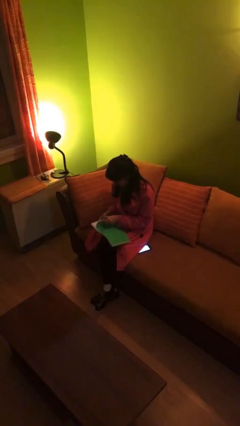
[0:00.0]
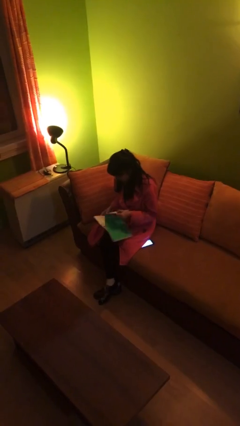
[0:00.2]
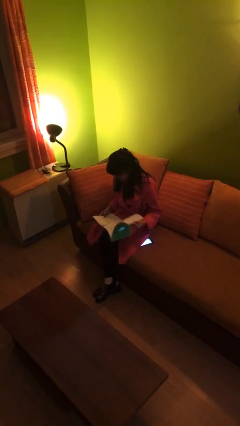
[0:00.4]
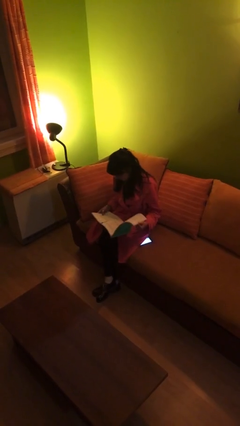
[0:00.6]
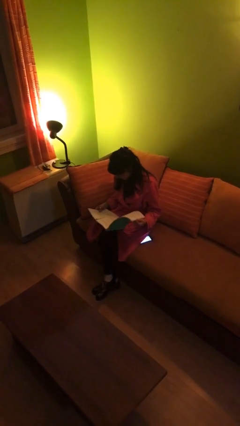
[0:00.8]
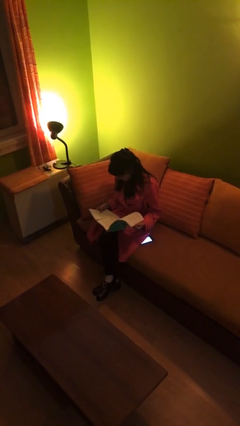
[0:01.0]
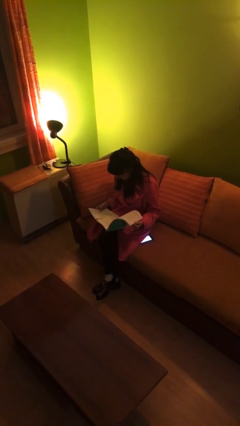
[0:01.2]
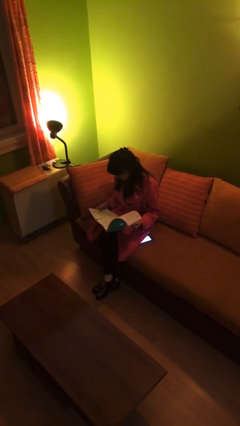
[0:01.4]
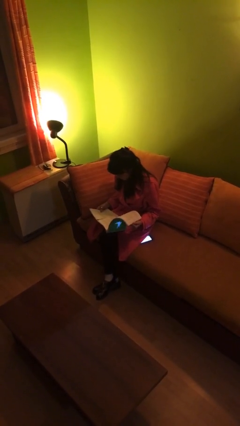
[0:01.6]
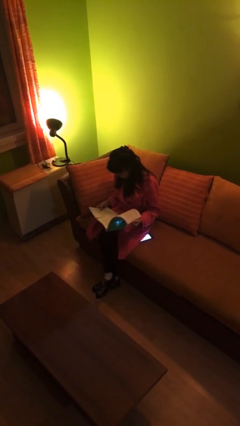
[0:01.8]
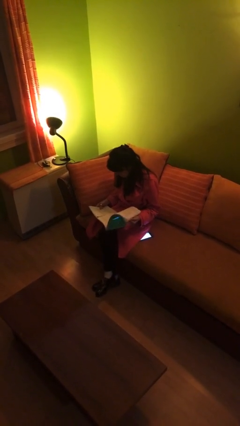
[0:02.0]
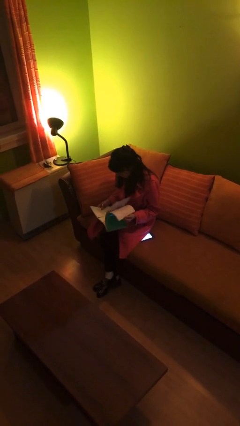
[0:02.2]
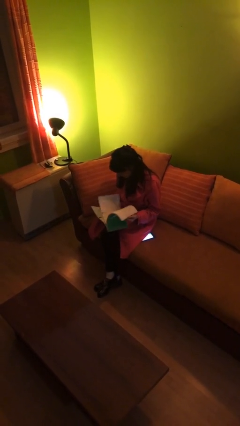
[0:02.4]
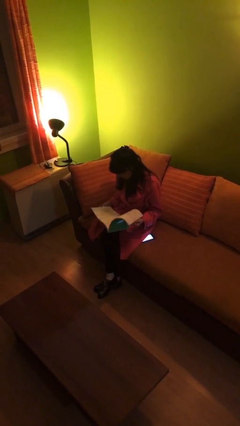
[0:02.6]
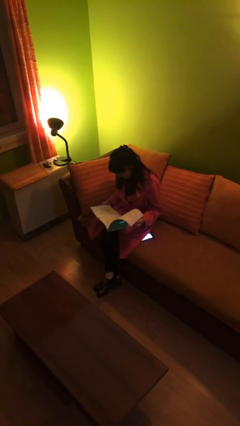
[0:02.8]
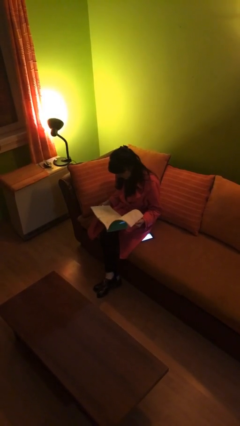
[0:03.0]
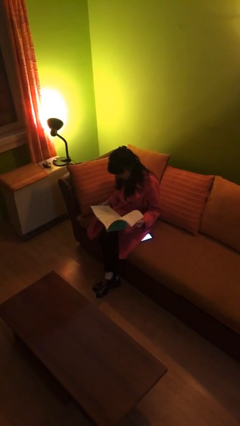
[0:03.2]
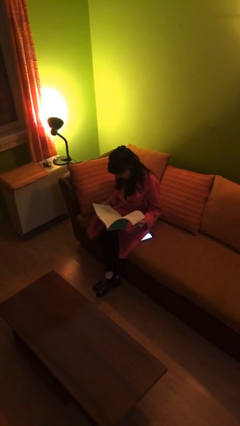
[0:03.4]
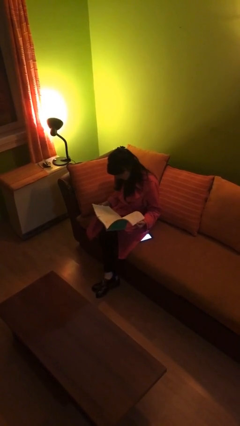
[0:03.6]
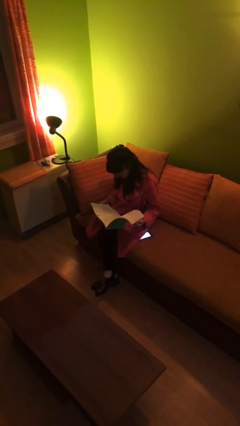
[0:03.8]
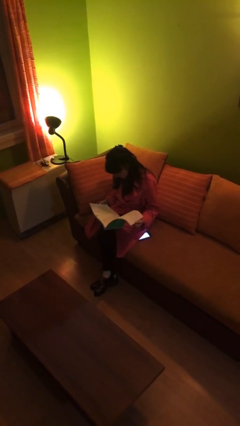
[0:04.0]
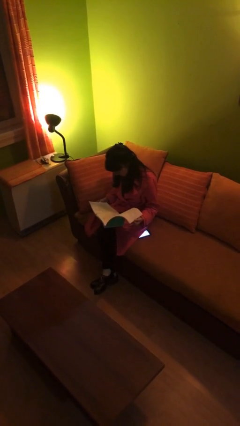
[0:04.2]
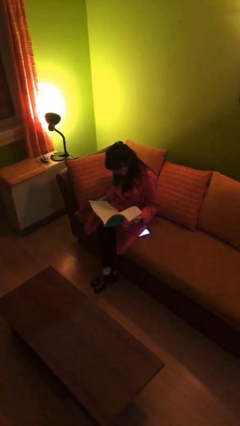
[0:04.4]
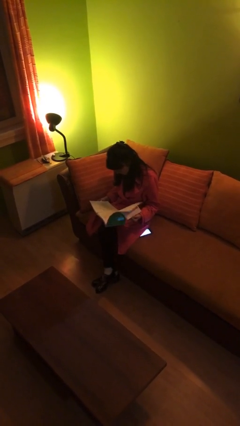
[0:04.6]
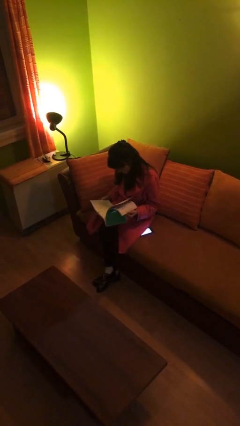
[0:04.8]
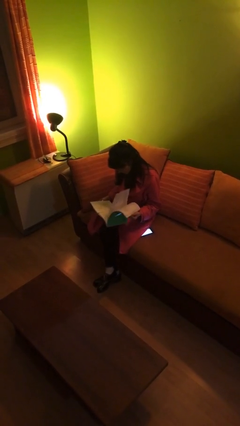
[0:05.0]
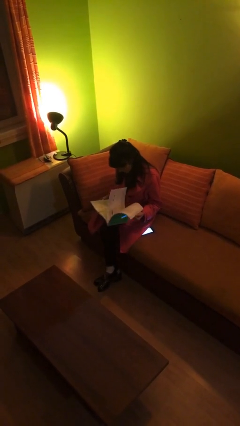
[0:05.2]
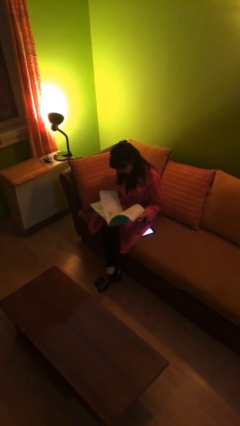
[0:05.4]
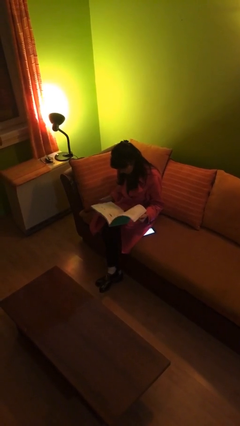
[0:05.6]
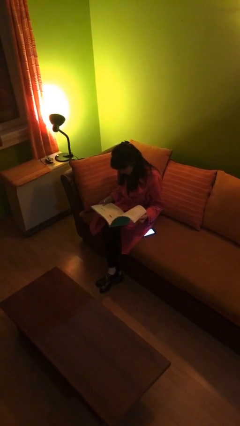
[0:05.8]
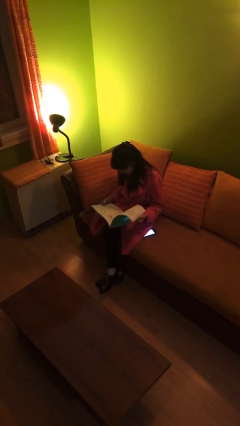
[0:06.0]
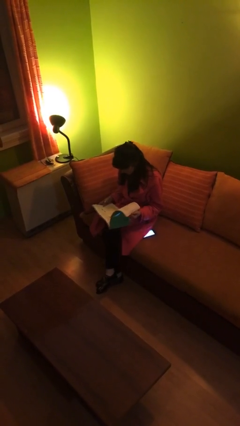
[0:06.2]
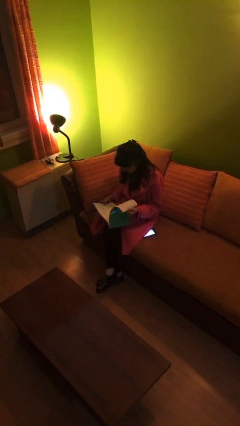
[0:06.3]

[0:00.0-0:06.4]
person reads document

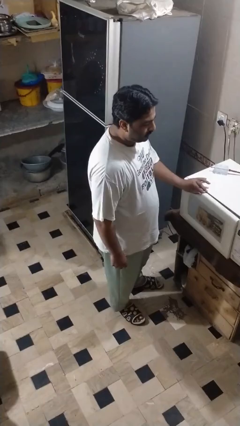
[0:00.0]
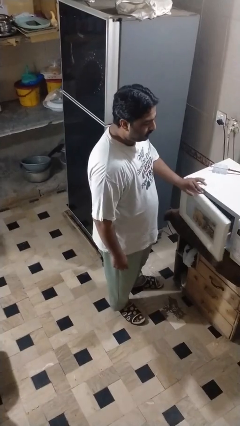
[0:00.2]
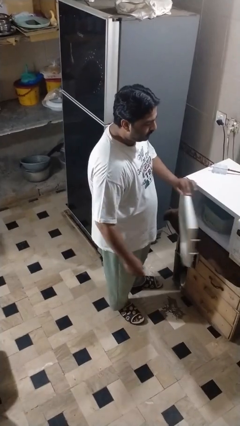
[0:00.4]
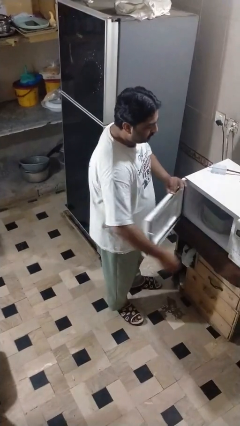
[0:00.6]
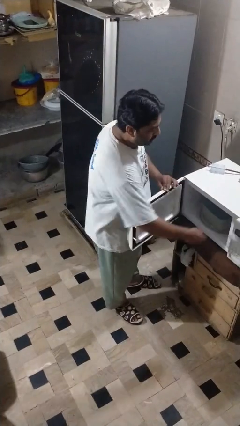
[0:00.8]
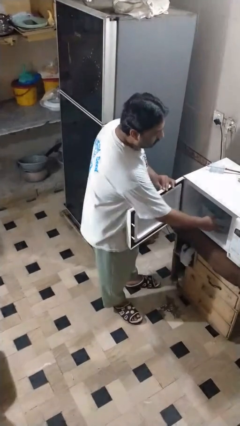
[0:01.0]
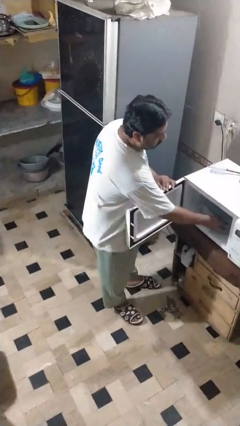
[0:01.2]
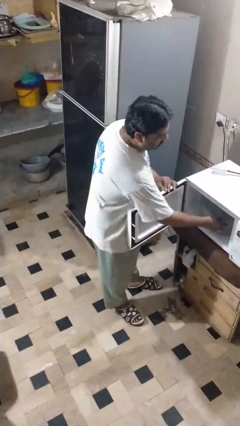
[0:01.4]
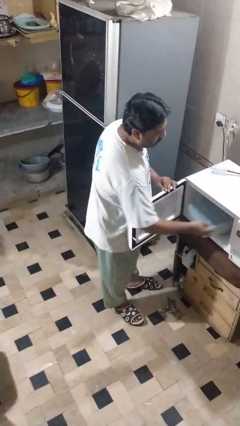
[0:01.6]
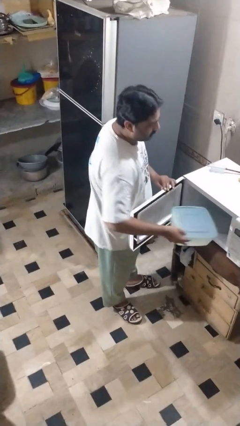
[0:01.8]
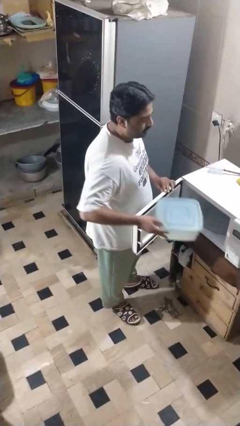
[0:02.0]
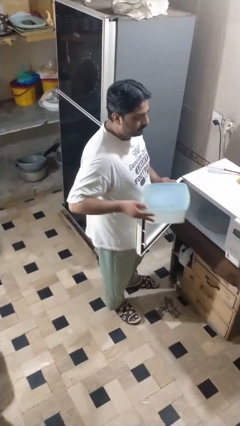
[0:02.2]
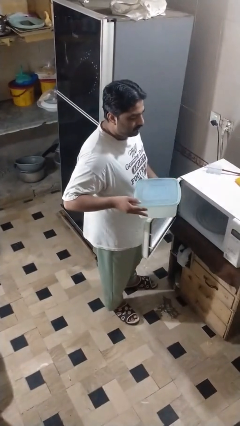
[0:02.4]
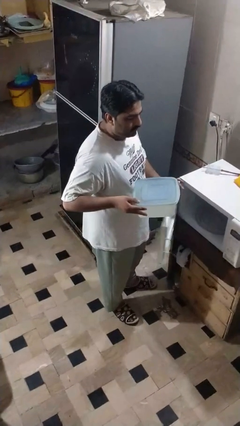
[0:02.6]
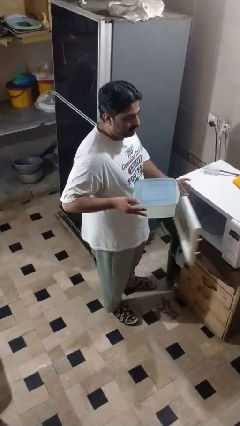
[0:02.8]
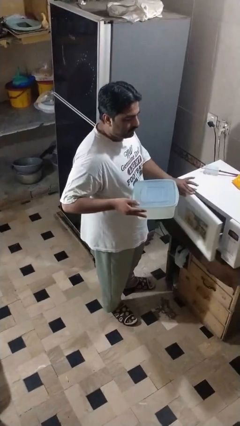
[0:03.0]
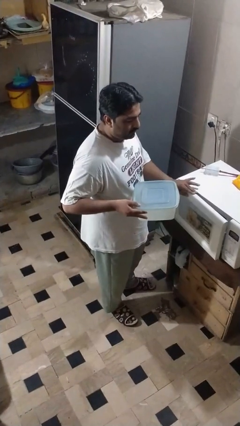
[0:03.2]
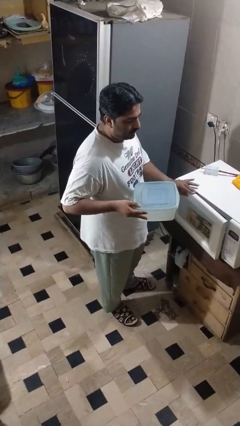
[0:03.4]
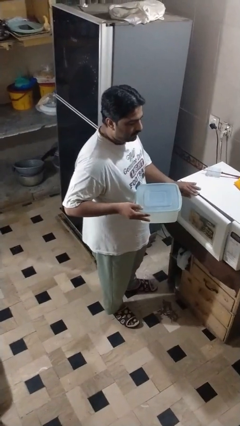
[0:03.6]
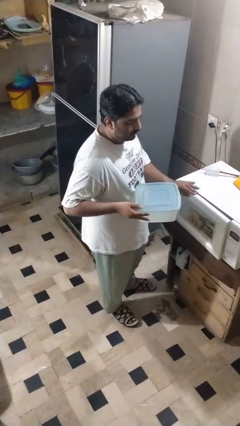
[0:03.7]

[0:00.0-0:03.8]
person takes object from microwave

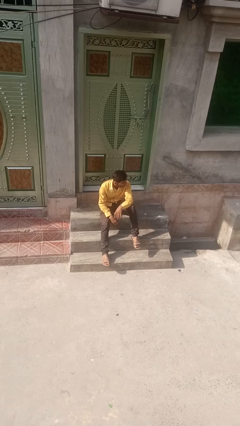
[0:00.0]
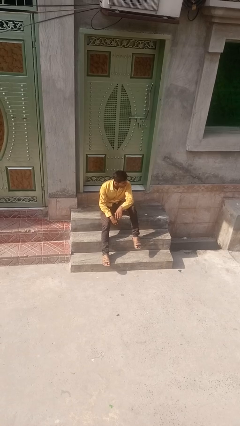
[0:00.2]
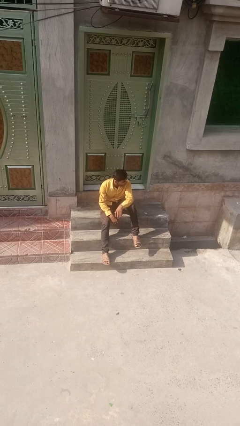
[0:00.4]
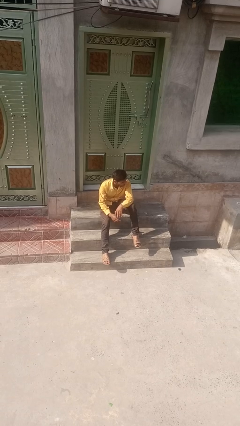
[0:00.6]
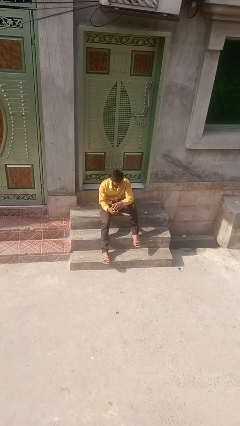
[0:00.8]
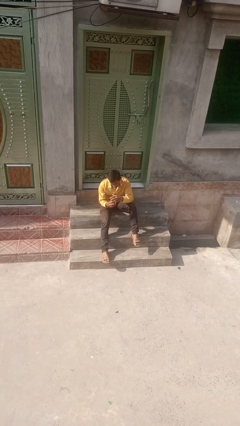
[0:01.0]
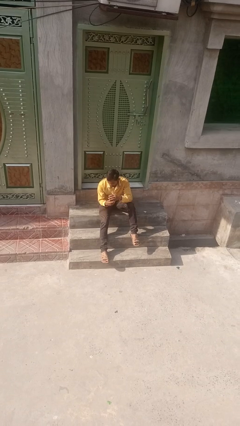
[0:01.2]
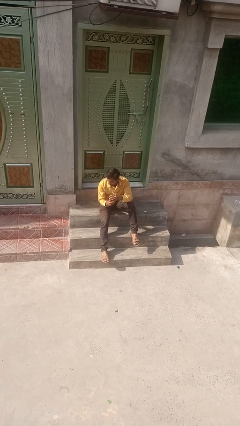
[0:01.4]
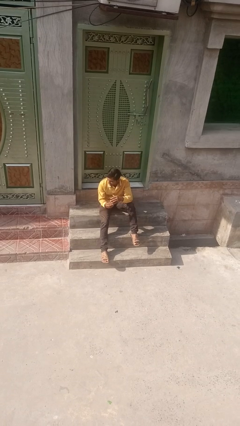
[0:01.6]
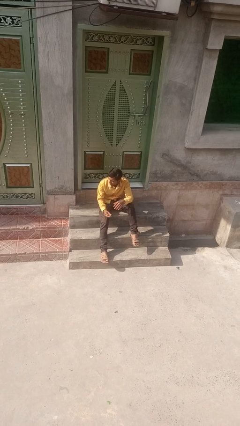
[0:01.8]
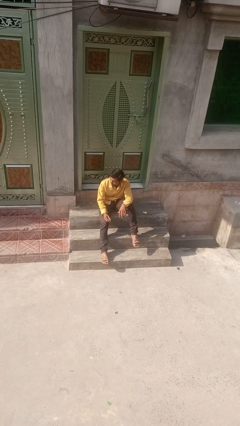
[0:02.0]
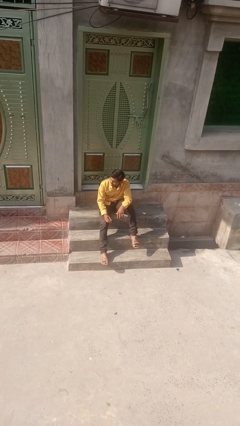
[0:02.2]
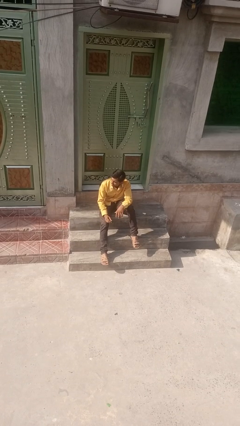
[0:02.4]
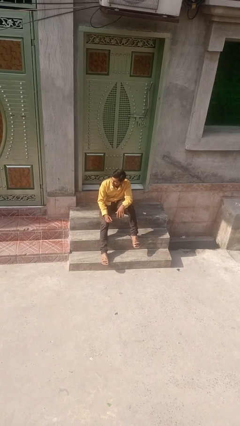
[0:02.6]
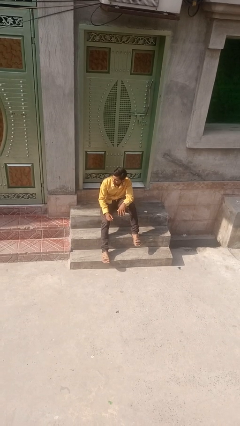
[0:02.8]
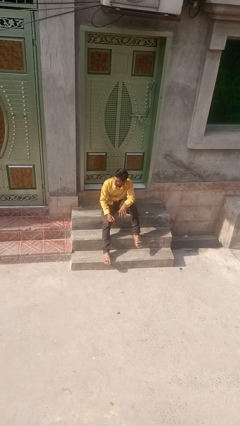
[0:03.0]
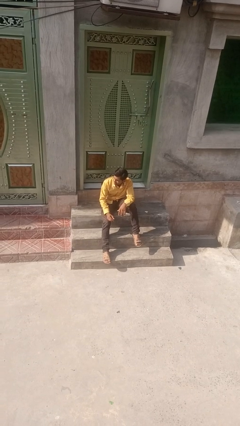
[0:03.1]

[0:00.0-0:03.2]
person takes off ring

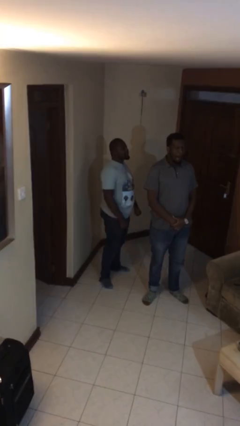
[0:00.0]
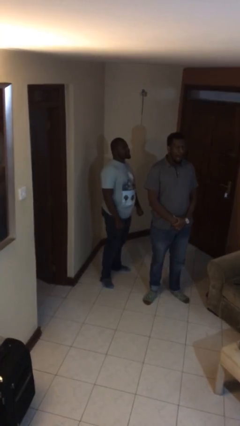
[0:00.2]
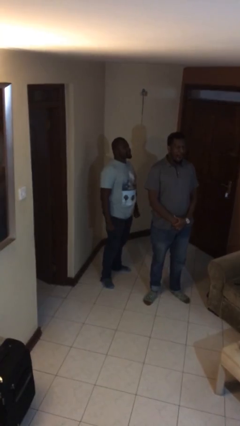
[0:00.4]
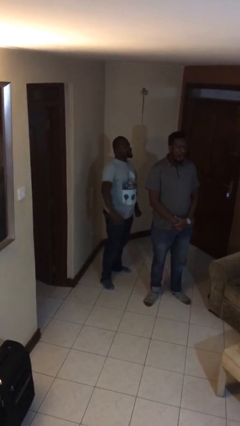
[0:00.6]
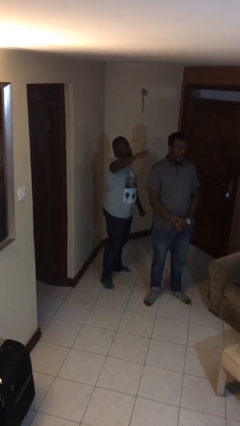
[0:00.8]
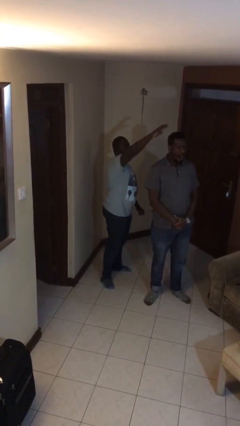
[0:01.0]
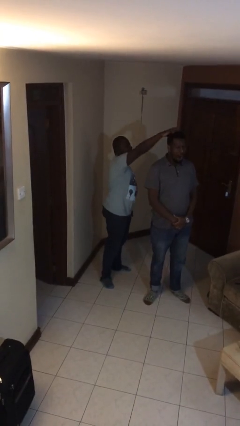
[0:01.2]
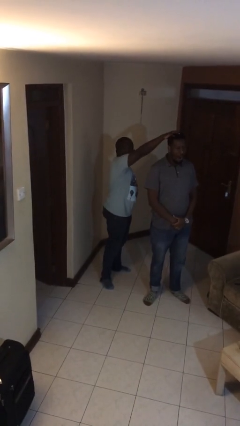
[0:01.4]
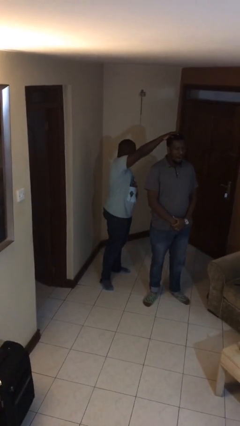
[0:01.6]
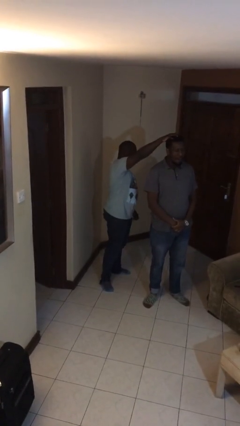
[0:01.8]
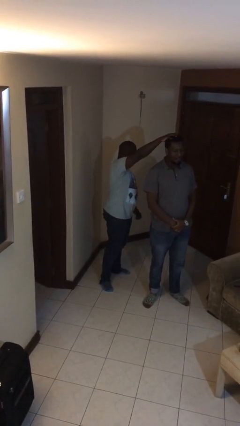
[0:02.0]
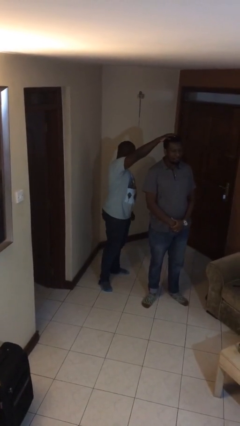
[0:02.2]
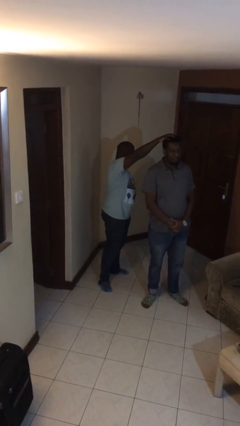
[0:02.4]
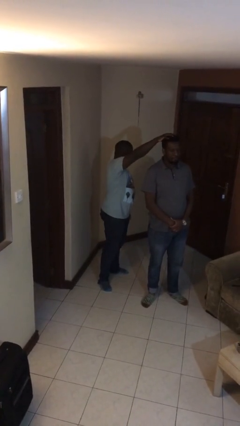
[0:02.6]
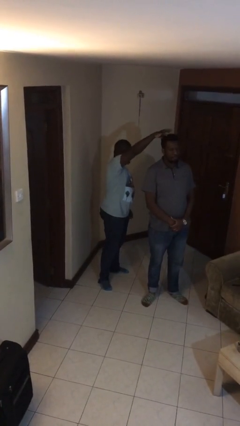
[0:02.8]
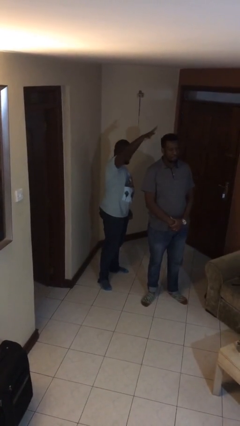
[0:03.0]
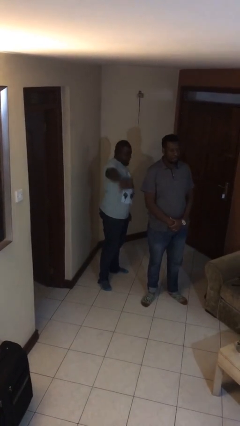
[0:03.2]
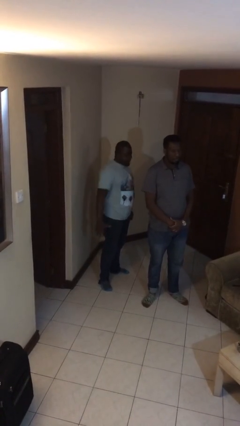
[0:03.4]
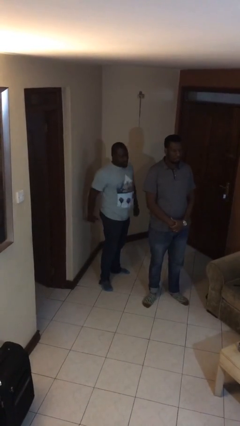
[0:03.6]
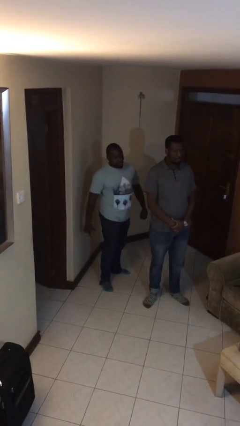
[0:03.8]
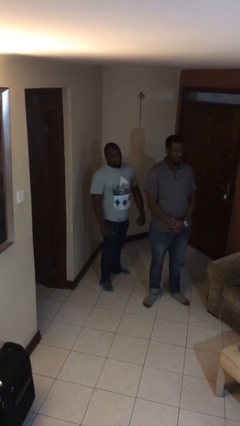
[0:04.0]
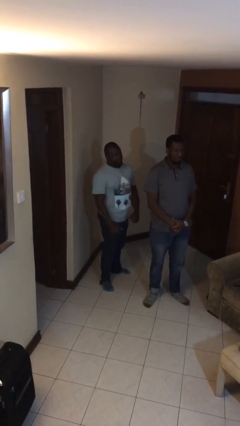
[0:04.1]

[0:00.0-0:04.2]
person grabs person by hair
